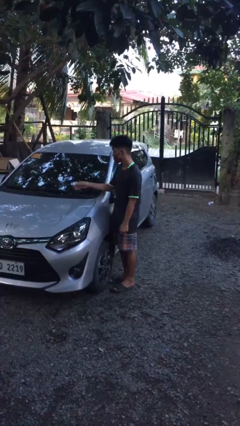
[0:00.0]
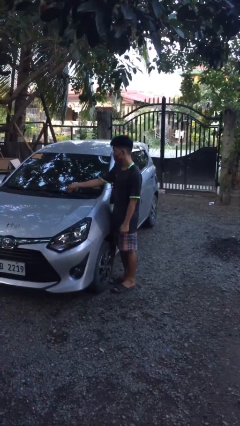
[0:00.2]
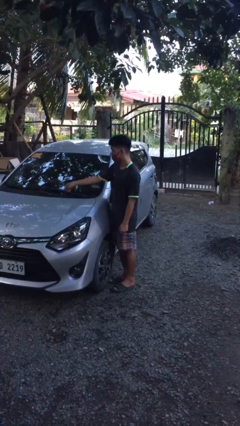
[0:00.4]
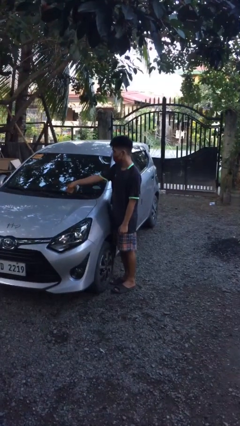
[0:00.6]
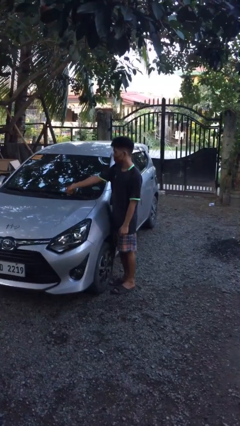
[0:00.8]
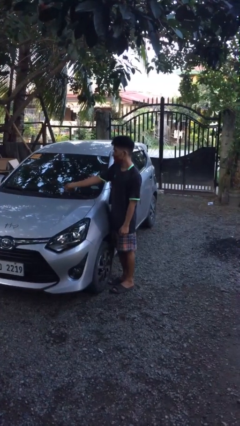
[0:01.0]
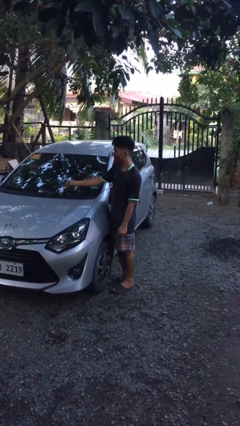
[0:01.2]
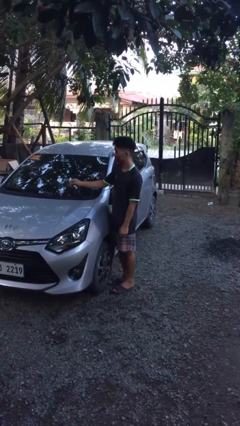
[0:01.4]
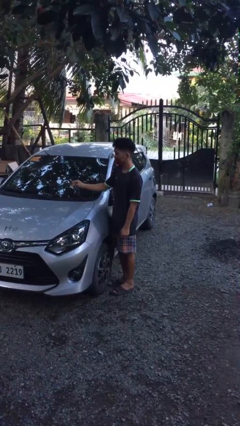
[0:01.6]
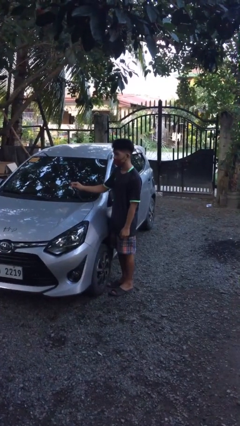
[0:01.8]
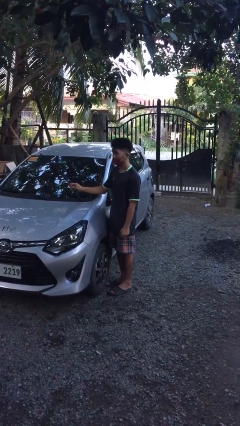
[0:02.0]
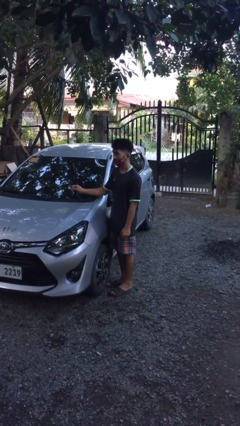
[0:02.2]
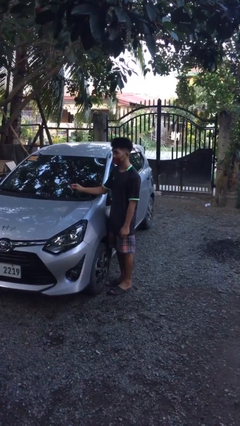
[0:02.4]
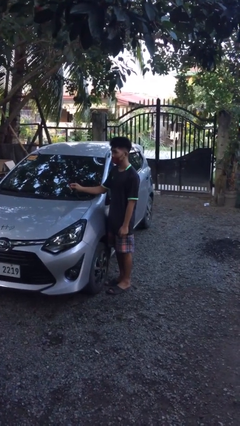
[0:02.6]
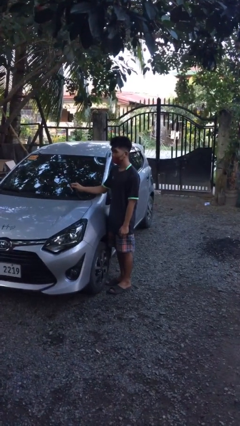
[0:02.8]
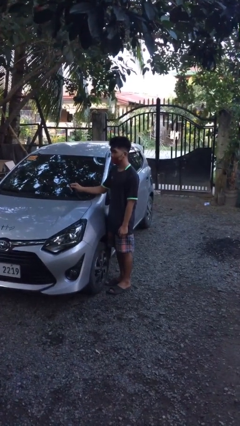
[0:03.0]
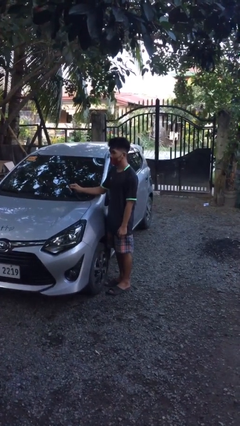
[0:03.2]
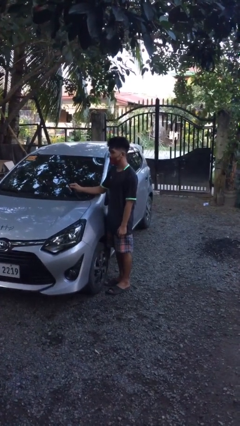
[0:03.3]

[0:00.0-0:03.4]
person flips up car wipers

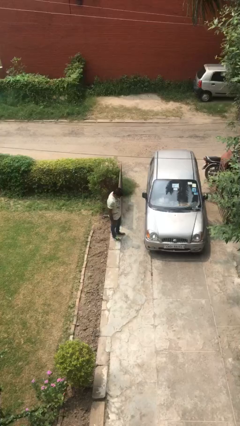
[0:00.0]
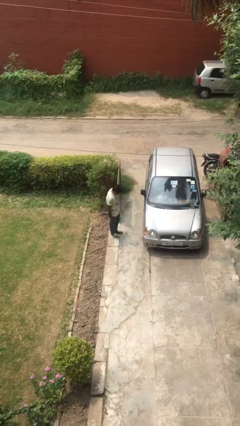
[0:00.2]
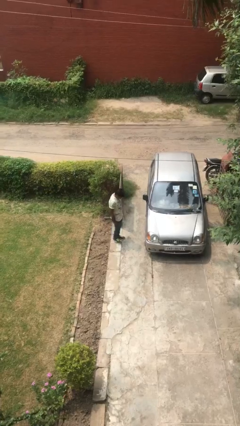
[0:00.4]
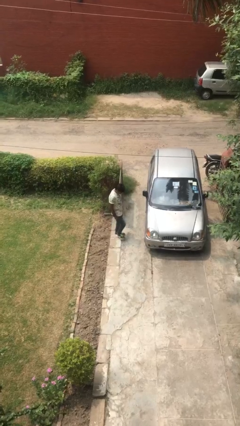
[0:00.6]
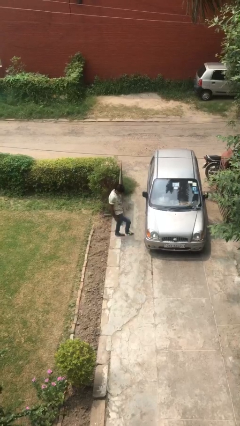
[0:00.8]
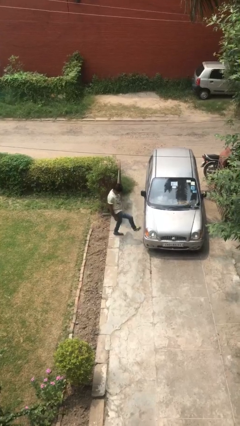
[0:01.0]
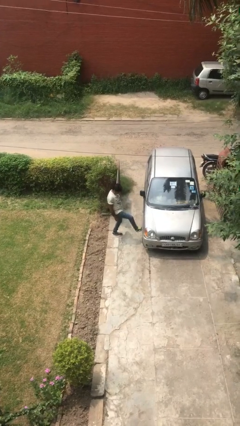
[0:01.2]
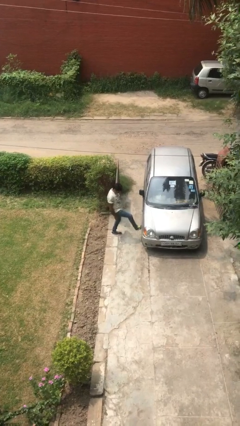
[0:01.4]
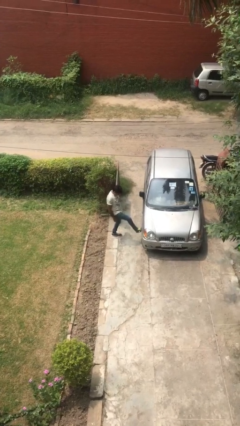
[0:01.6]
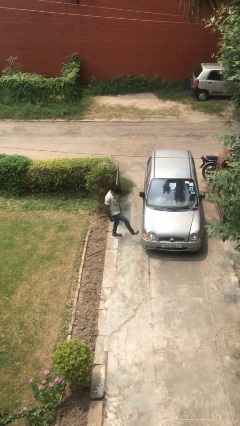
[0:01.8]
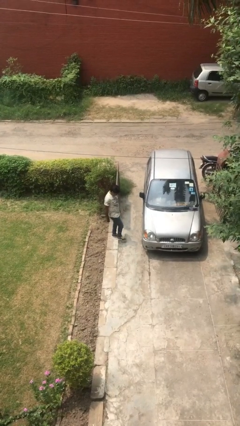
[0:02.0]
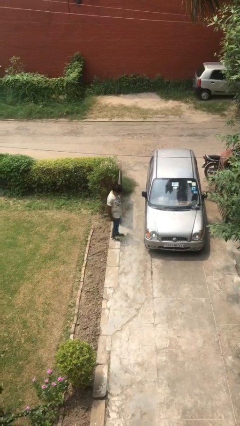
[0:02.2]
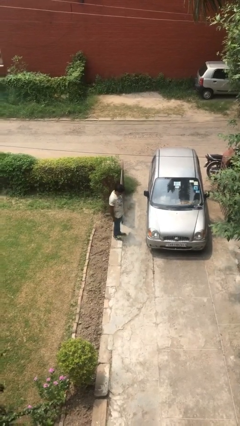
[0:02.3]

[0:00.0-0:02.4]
person kicks car tires

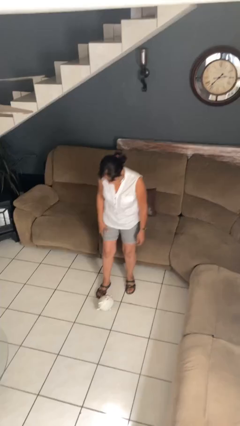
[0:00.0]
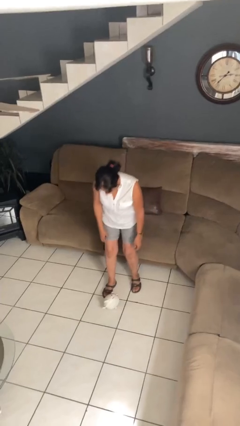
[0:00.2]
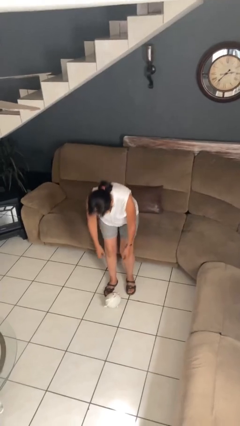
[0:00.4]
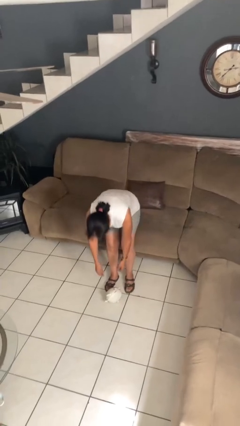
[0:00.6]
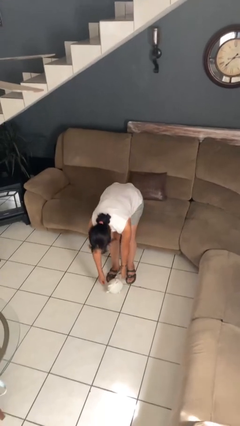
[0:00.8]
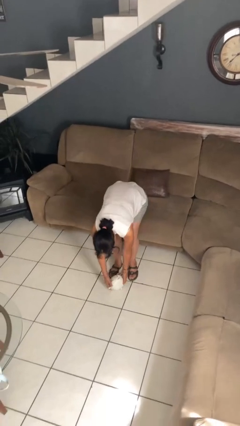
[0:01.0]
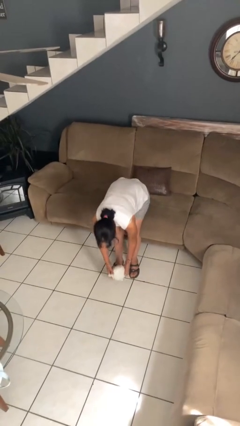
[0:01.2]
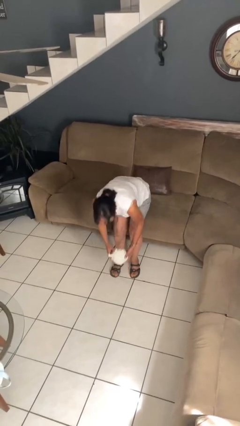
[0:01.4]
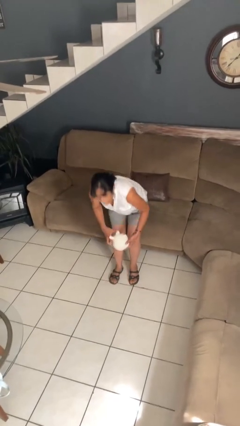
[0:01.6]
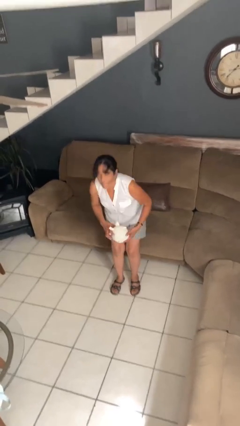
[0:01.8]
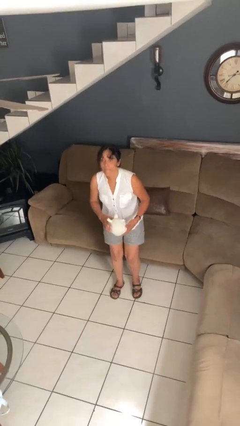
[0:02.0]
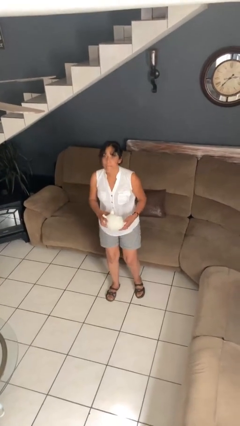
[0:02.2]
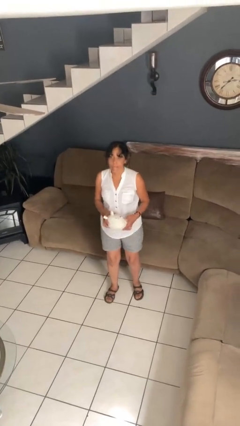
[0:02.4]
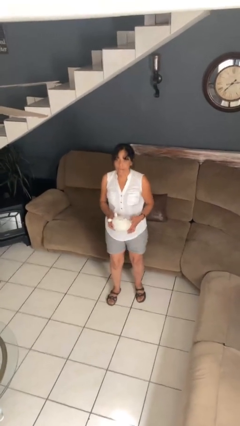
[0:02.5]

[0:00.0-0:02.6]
person picks up object from floor

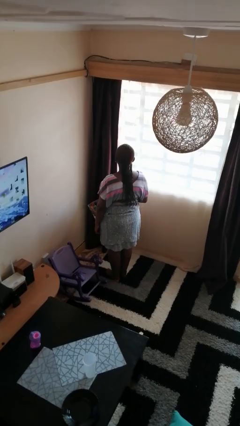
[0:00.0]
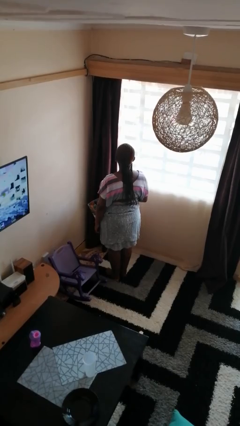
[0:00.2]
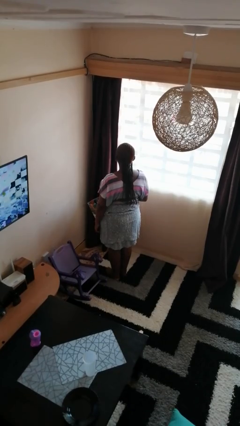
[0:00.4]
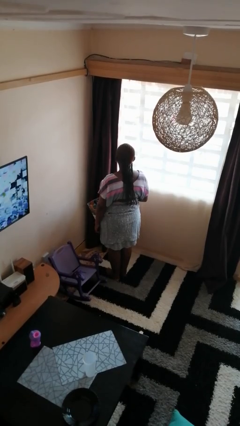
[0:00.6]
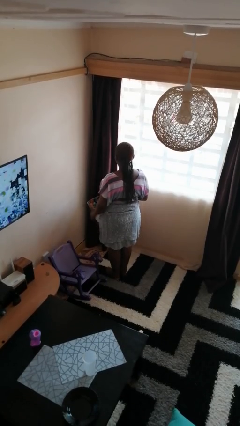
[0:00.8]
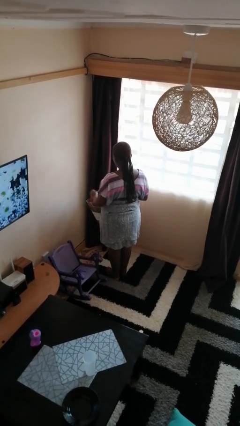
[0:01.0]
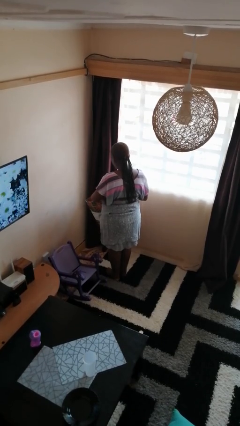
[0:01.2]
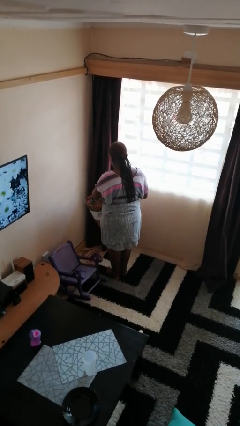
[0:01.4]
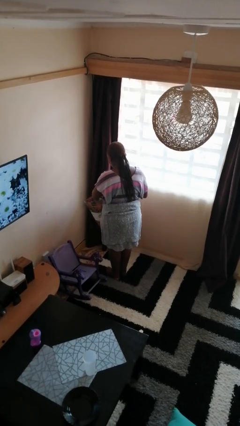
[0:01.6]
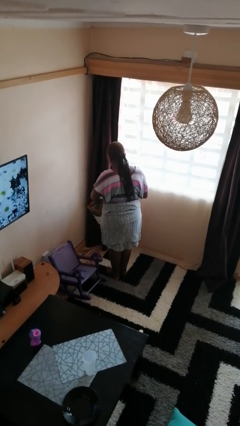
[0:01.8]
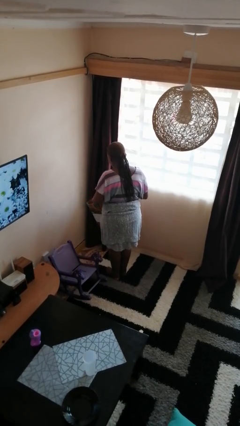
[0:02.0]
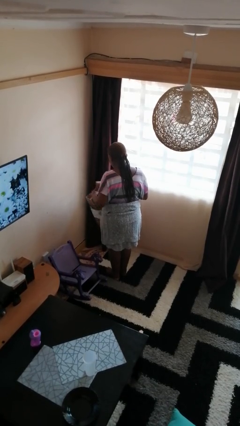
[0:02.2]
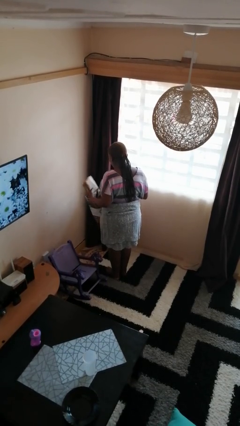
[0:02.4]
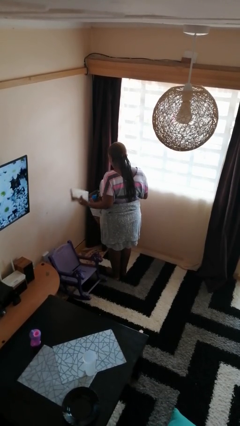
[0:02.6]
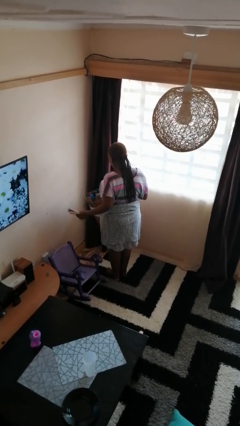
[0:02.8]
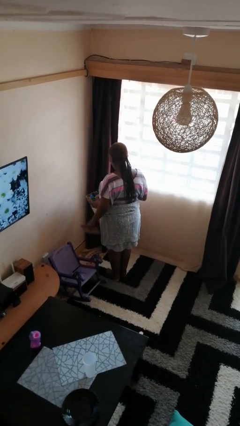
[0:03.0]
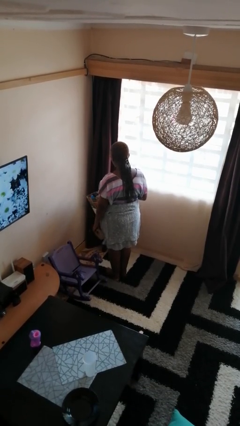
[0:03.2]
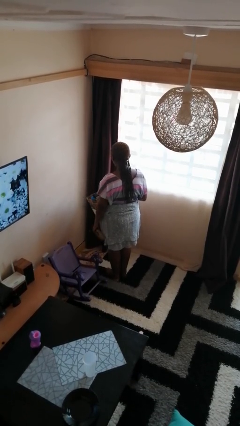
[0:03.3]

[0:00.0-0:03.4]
person takes object from bag

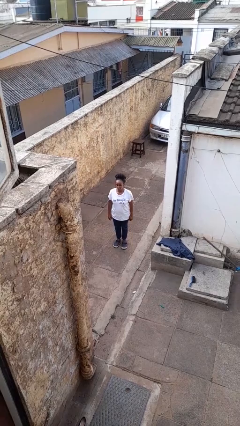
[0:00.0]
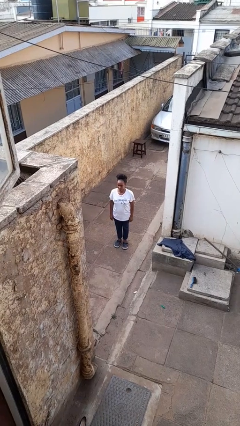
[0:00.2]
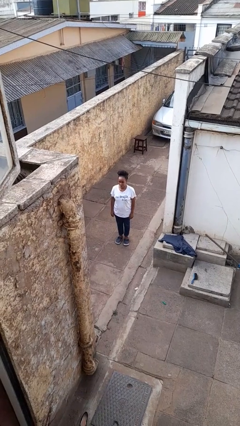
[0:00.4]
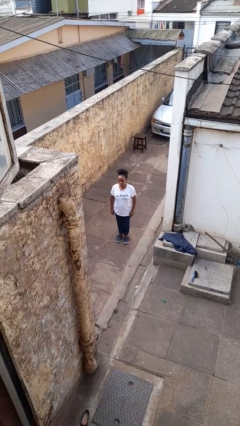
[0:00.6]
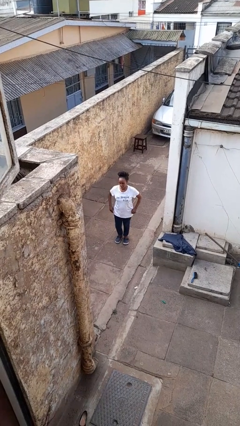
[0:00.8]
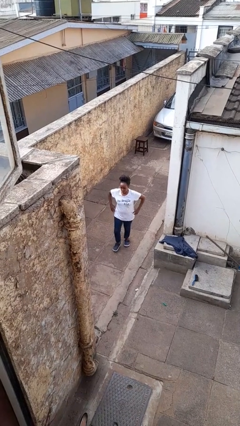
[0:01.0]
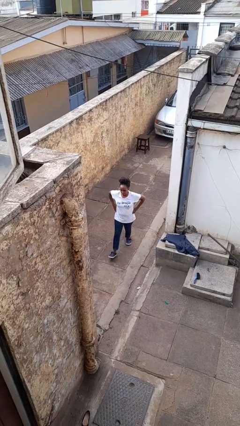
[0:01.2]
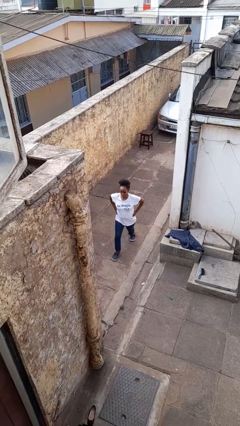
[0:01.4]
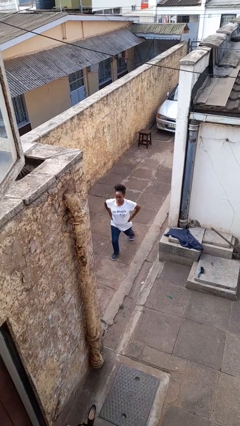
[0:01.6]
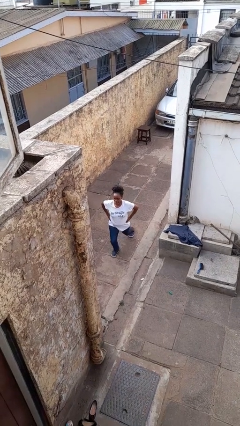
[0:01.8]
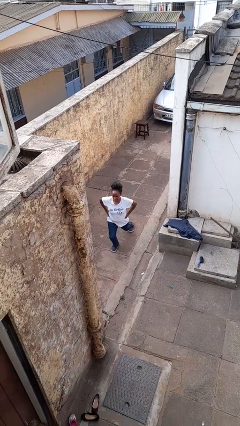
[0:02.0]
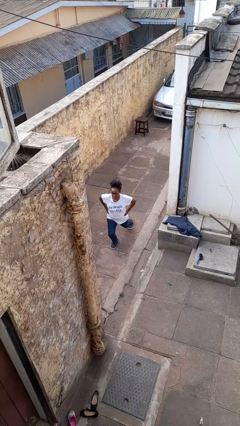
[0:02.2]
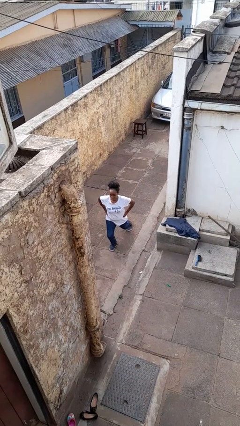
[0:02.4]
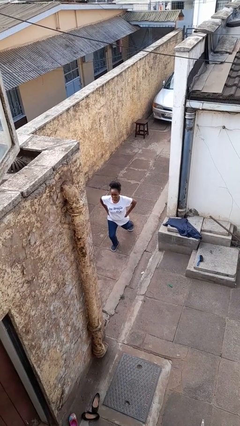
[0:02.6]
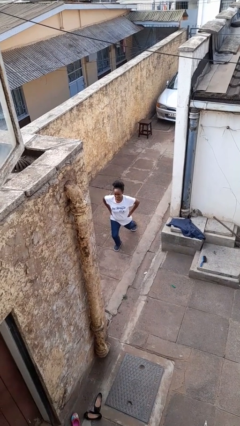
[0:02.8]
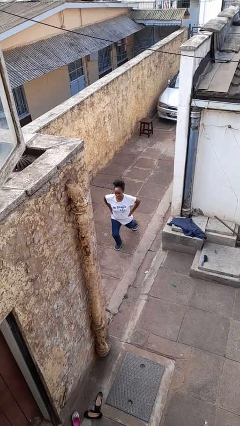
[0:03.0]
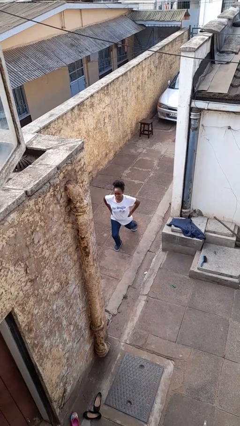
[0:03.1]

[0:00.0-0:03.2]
person exercises with lunges

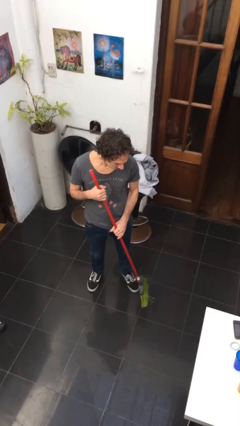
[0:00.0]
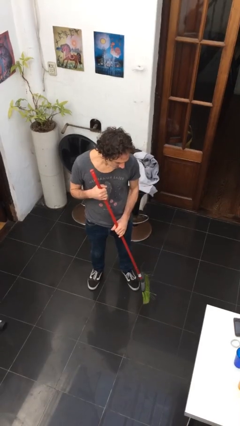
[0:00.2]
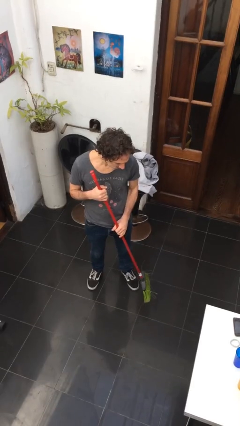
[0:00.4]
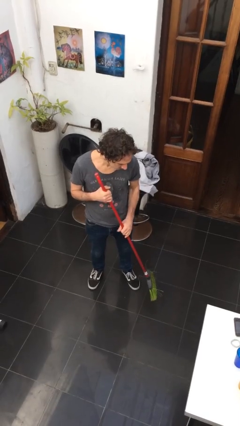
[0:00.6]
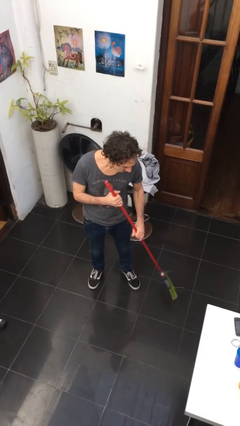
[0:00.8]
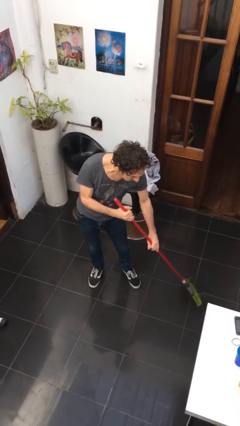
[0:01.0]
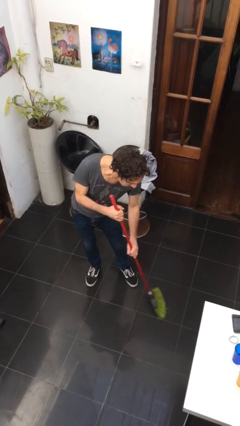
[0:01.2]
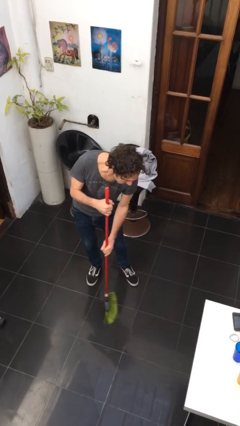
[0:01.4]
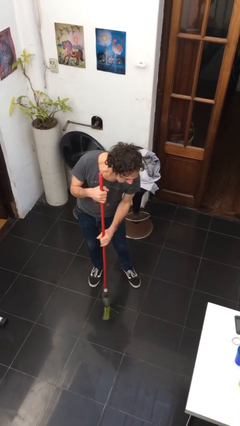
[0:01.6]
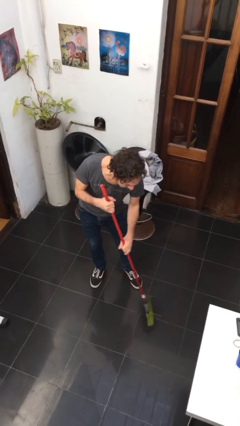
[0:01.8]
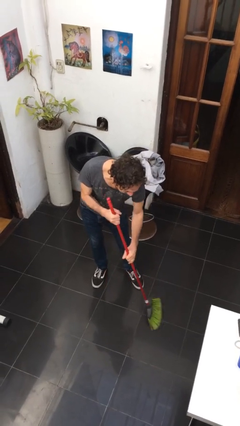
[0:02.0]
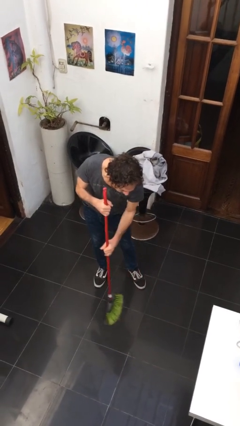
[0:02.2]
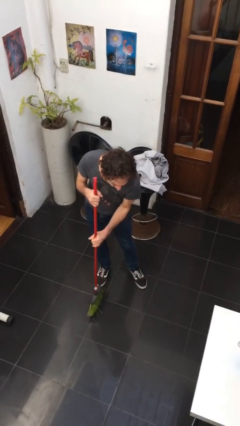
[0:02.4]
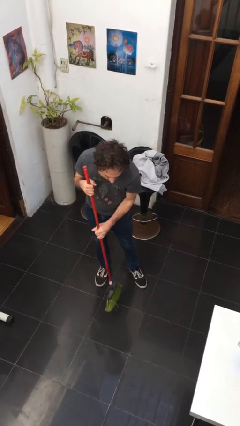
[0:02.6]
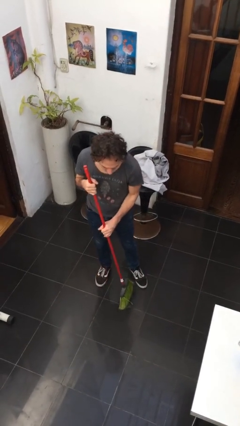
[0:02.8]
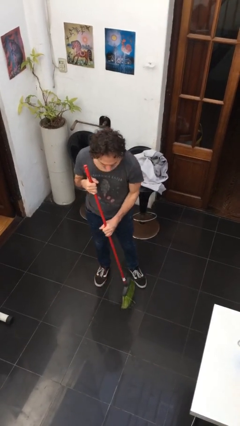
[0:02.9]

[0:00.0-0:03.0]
person sweeps floor
